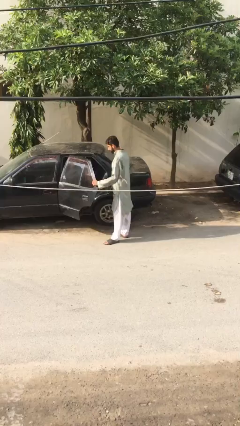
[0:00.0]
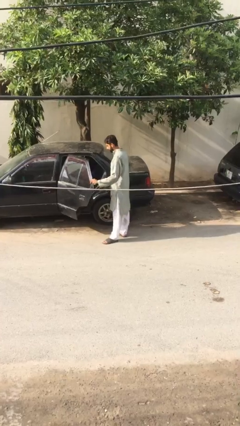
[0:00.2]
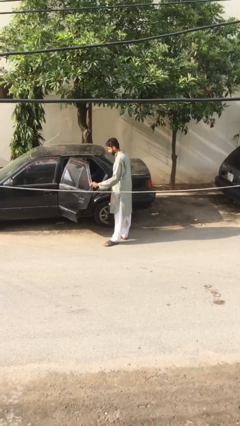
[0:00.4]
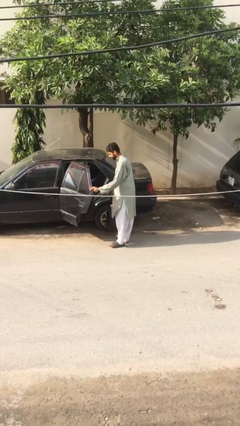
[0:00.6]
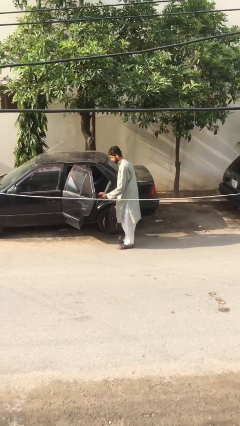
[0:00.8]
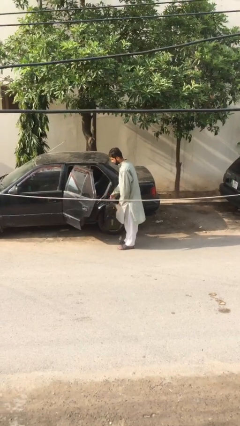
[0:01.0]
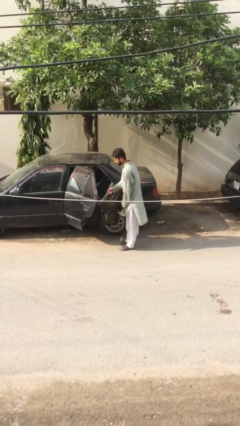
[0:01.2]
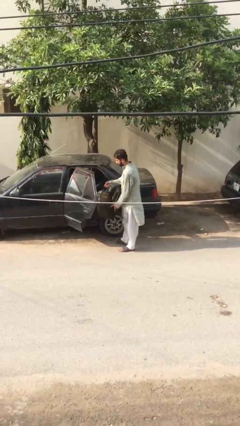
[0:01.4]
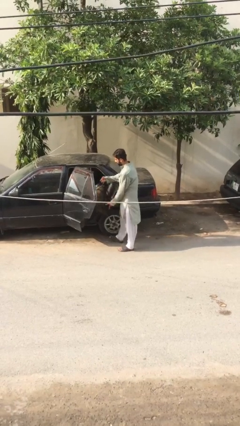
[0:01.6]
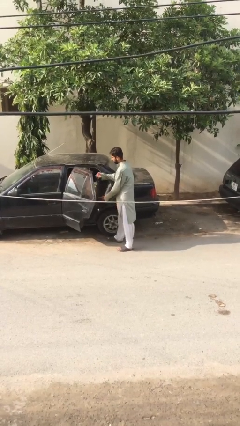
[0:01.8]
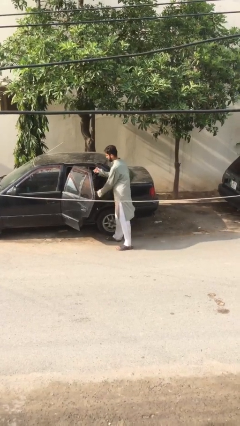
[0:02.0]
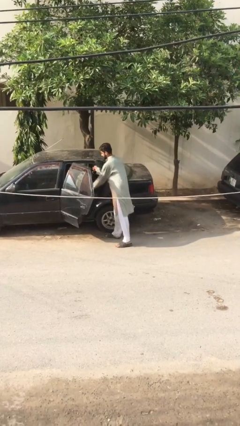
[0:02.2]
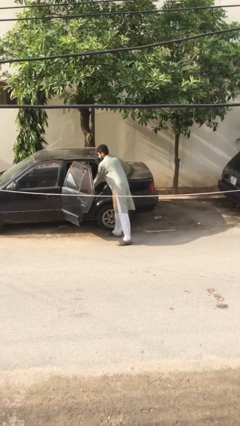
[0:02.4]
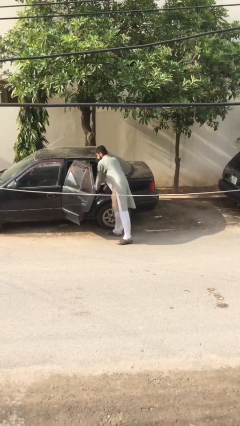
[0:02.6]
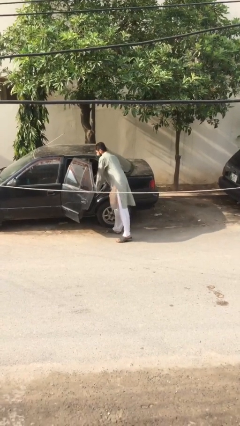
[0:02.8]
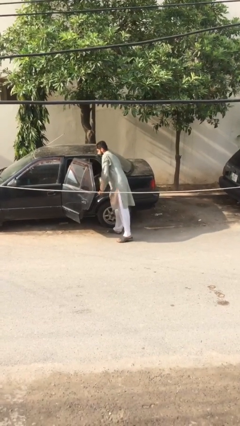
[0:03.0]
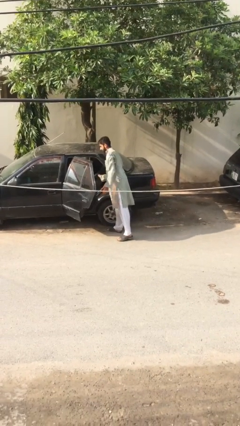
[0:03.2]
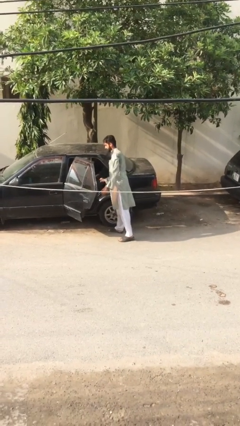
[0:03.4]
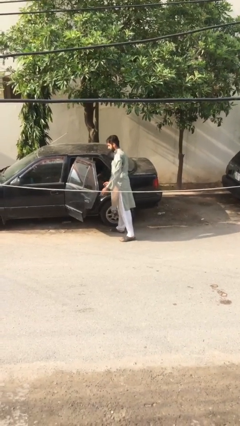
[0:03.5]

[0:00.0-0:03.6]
person loads car

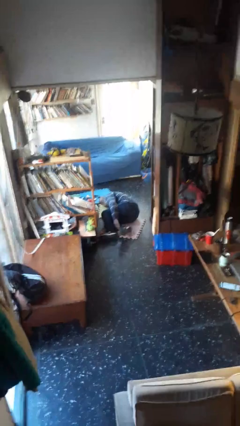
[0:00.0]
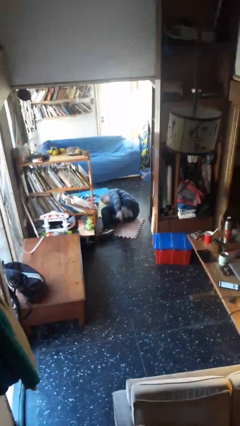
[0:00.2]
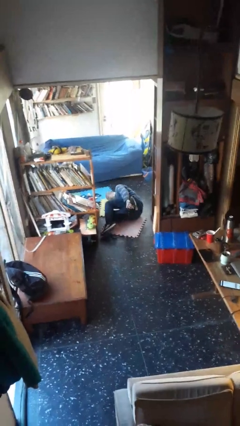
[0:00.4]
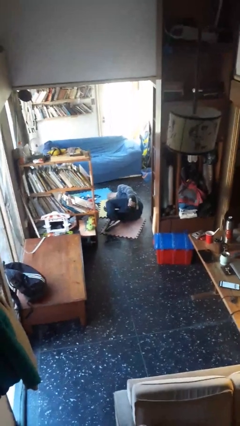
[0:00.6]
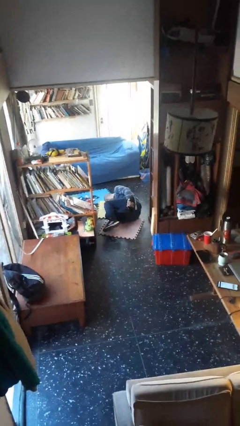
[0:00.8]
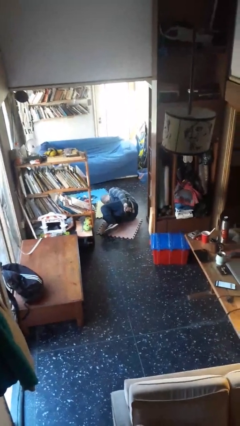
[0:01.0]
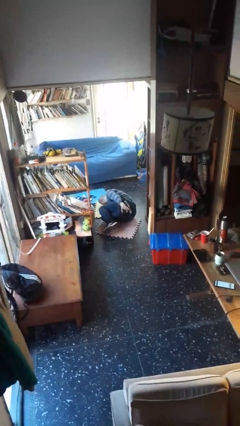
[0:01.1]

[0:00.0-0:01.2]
person lies down on floor

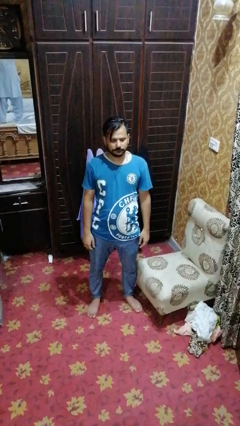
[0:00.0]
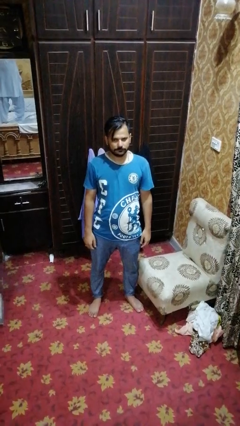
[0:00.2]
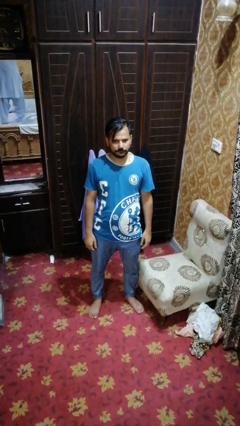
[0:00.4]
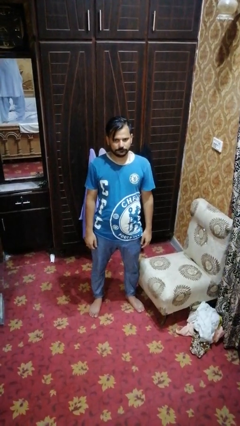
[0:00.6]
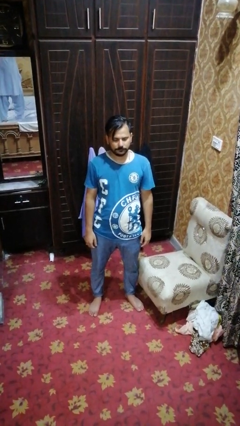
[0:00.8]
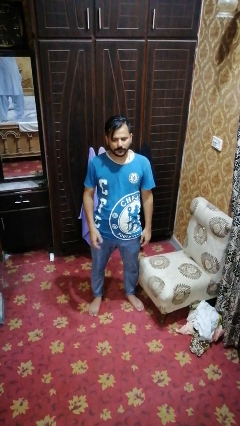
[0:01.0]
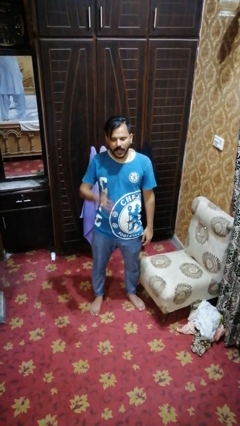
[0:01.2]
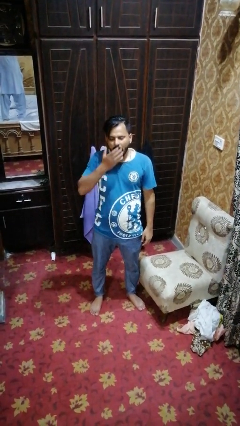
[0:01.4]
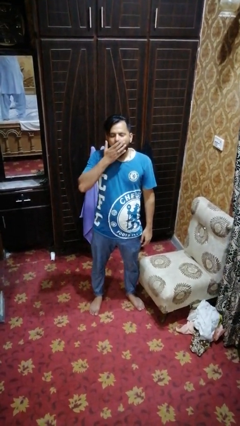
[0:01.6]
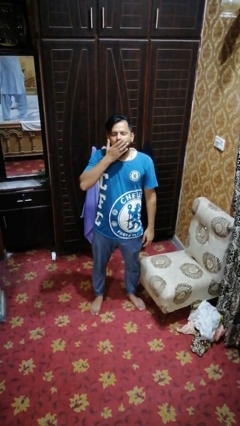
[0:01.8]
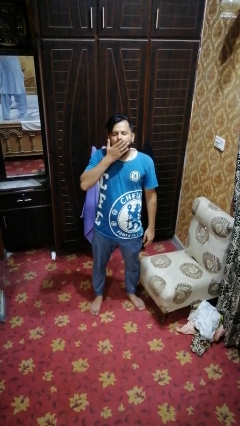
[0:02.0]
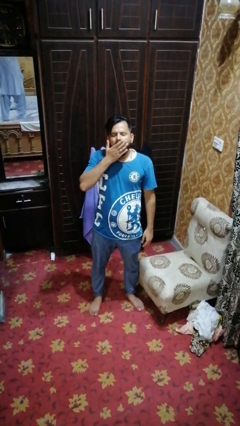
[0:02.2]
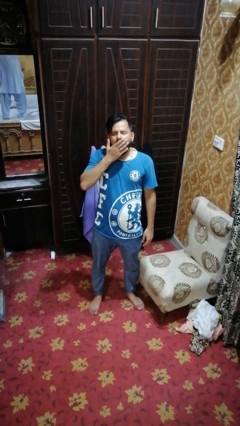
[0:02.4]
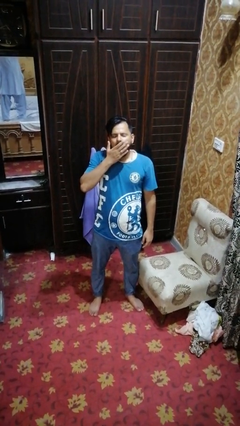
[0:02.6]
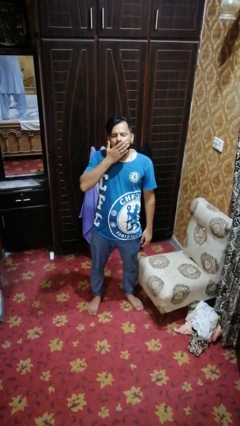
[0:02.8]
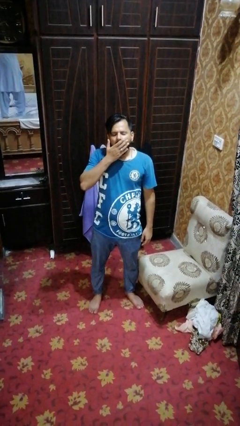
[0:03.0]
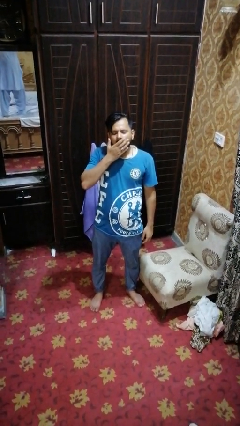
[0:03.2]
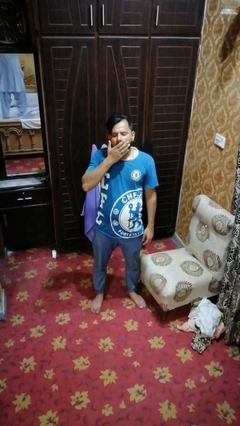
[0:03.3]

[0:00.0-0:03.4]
person yawns

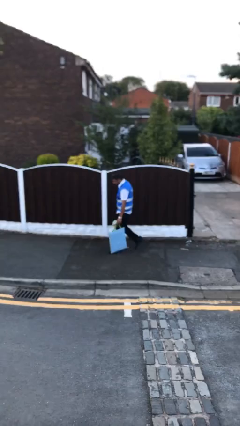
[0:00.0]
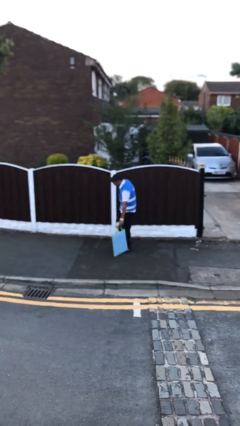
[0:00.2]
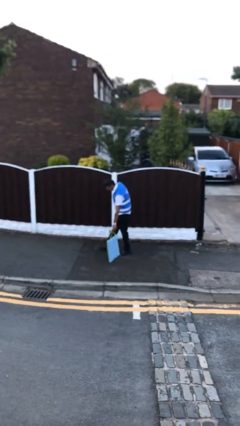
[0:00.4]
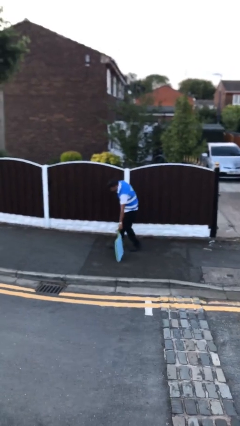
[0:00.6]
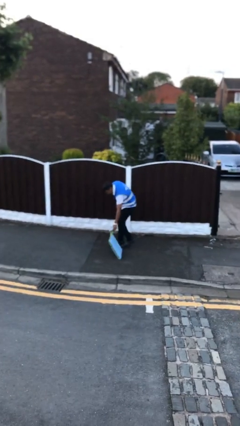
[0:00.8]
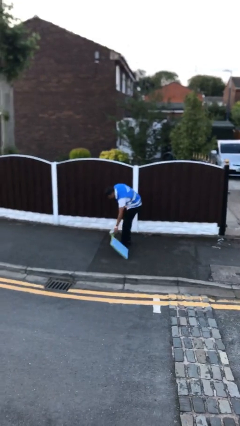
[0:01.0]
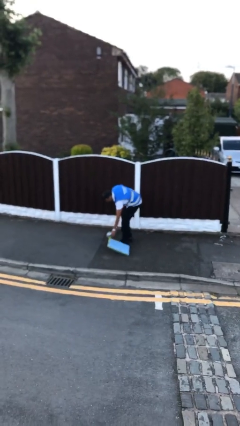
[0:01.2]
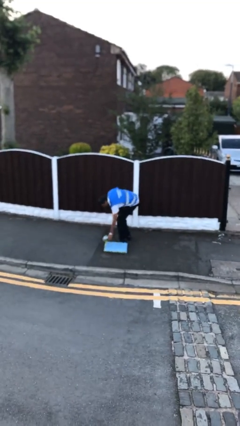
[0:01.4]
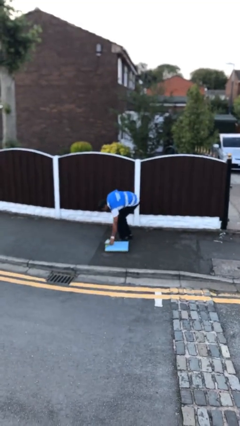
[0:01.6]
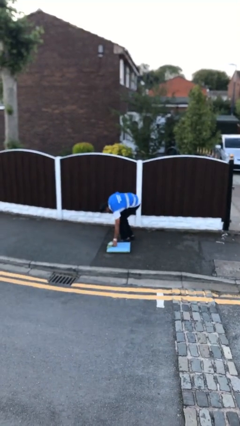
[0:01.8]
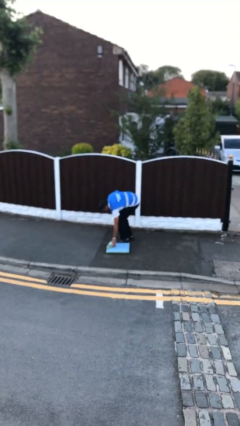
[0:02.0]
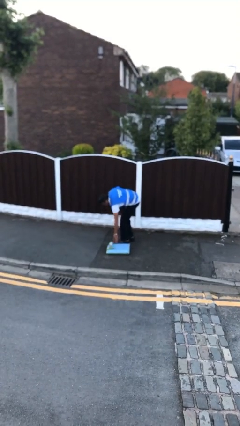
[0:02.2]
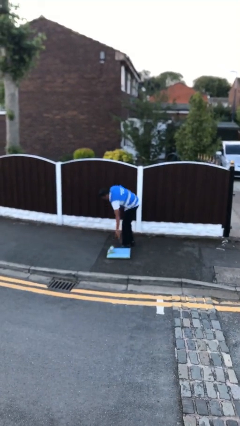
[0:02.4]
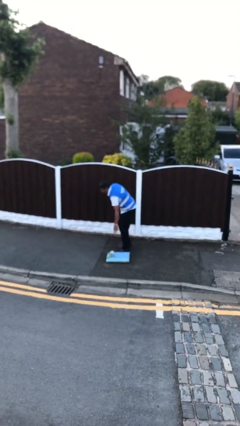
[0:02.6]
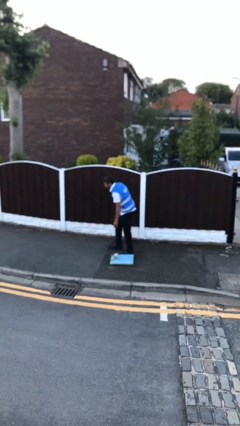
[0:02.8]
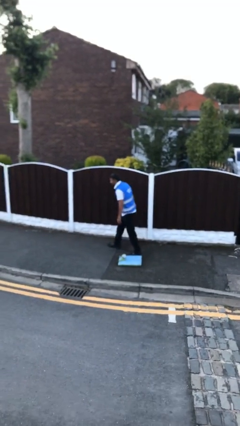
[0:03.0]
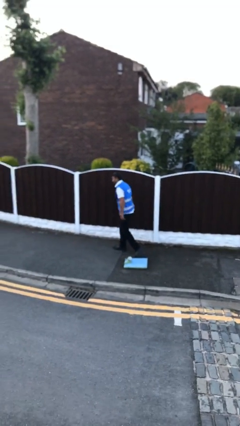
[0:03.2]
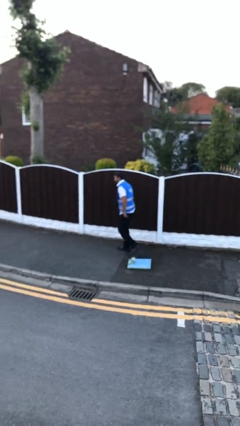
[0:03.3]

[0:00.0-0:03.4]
person puts down object on floor

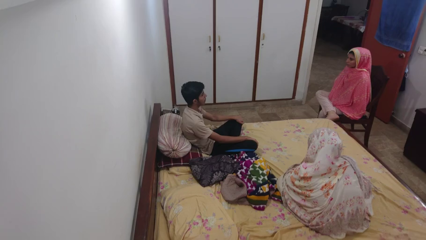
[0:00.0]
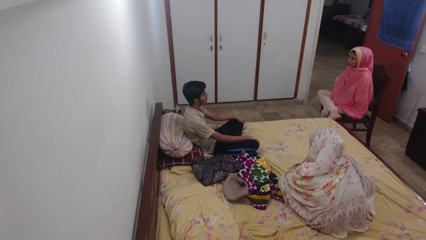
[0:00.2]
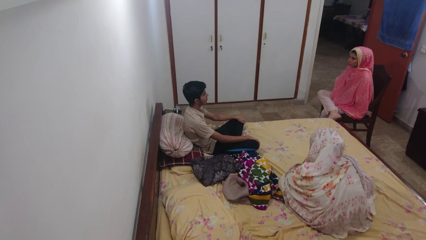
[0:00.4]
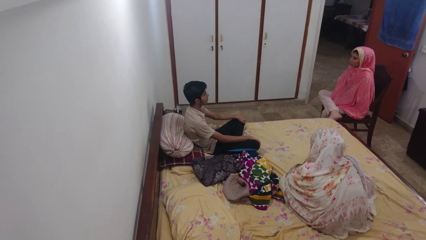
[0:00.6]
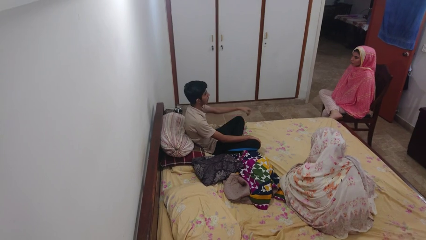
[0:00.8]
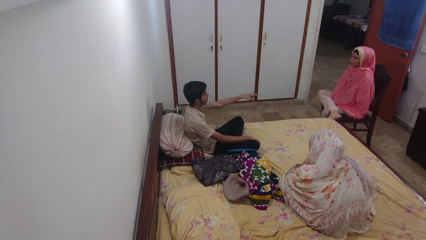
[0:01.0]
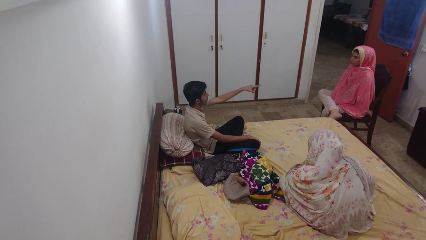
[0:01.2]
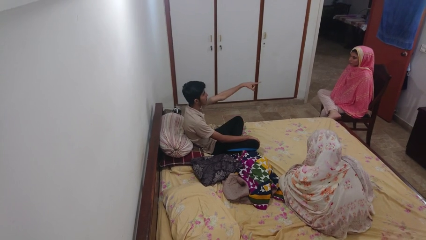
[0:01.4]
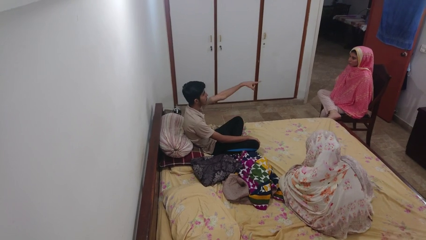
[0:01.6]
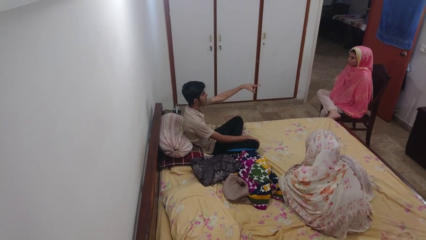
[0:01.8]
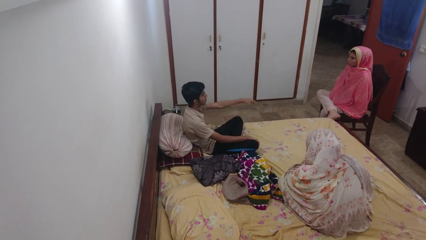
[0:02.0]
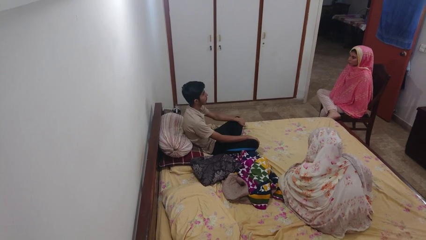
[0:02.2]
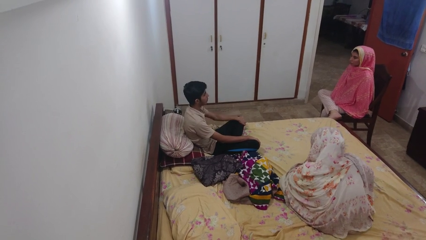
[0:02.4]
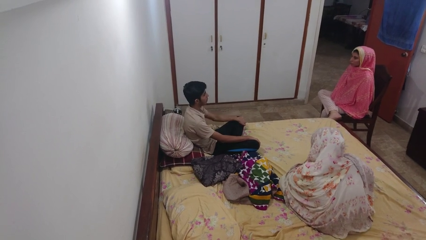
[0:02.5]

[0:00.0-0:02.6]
person points at person

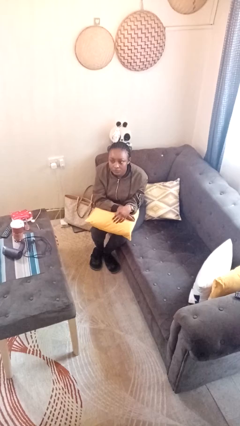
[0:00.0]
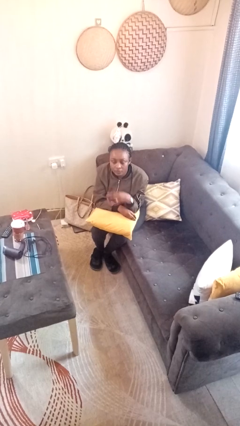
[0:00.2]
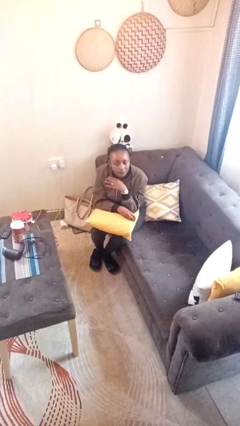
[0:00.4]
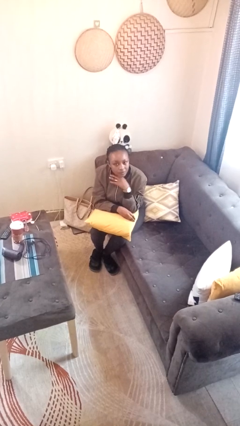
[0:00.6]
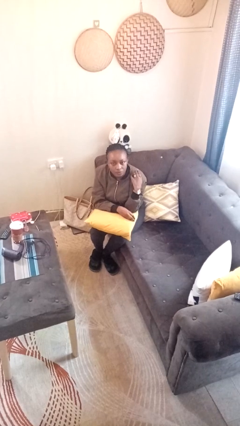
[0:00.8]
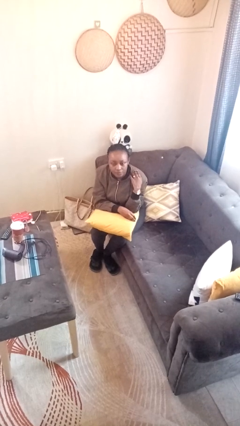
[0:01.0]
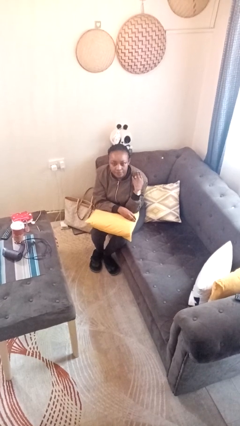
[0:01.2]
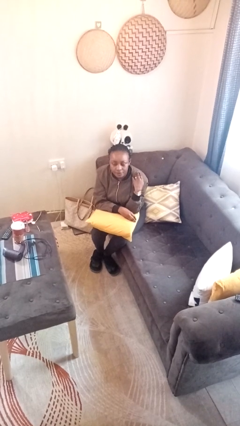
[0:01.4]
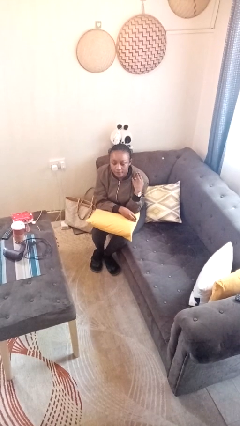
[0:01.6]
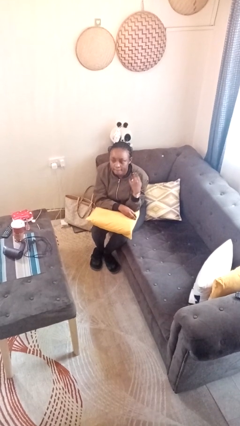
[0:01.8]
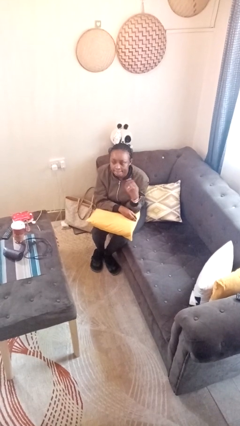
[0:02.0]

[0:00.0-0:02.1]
person gestures cut

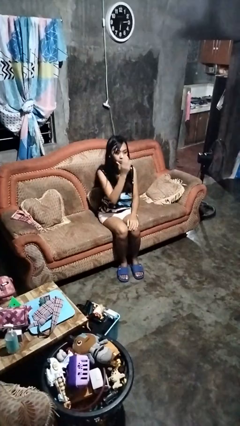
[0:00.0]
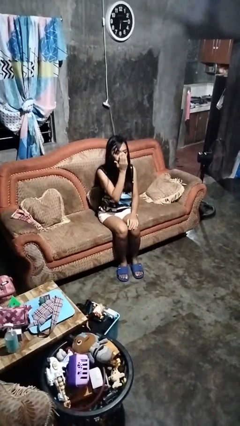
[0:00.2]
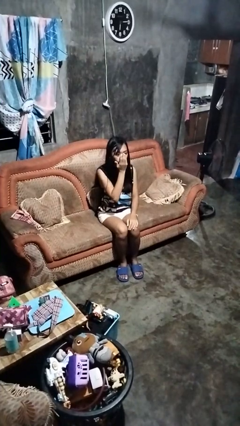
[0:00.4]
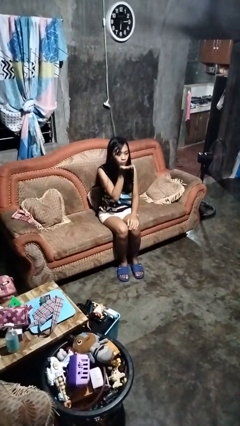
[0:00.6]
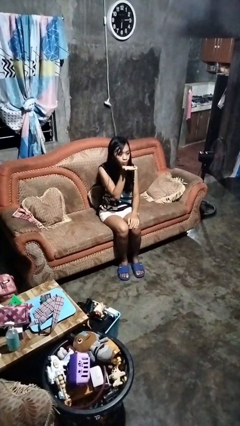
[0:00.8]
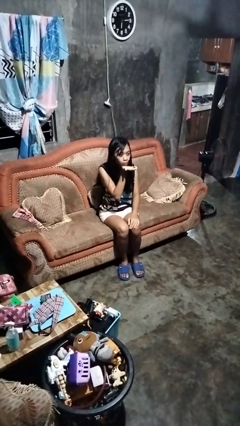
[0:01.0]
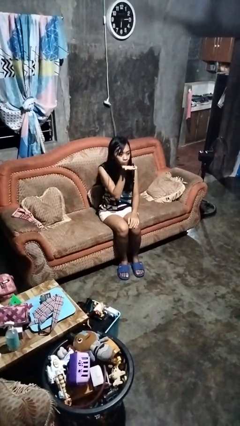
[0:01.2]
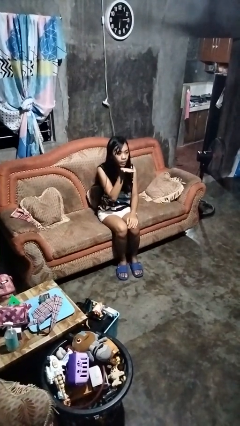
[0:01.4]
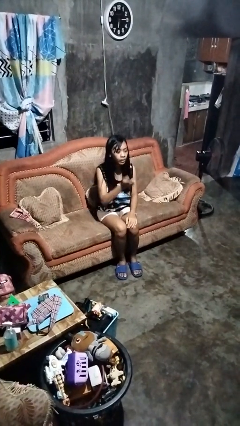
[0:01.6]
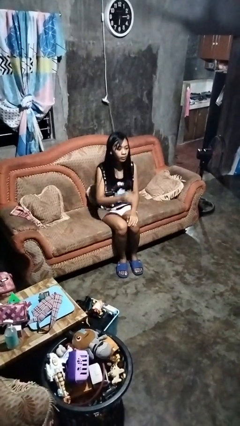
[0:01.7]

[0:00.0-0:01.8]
person gestures blow kiss
